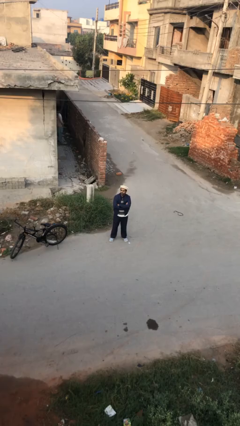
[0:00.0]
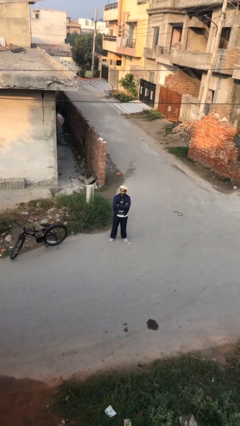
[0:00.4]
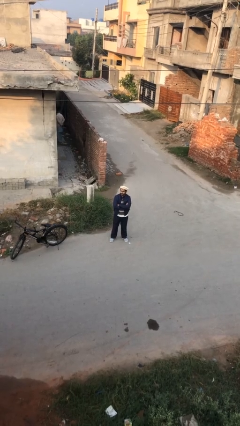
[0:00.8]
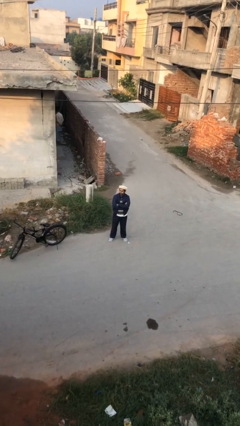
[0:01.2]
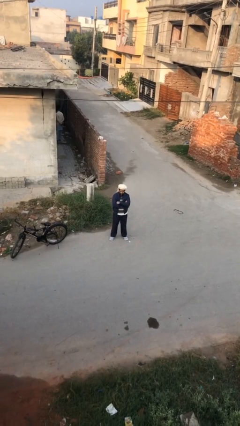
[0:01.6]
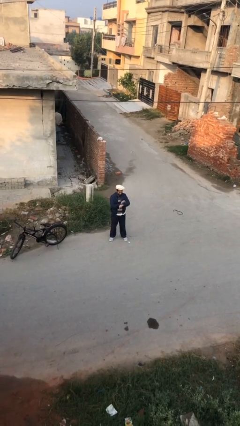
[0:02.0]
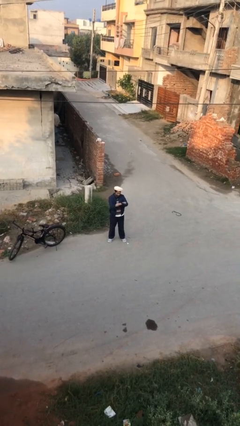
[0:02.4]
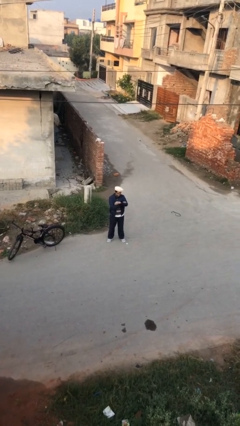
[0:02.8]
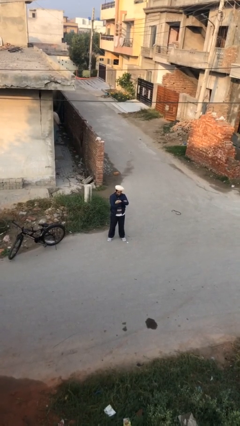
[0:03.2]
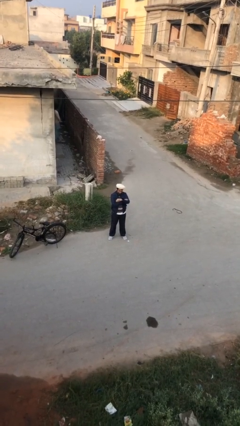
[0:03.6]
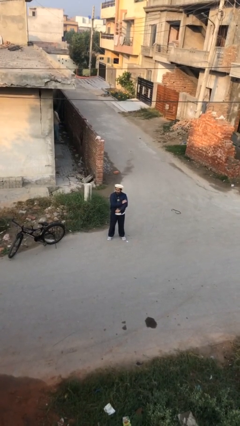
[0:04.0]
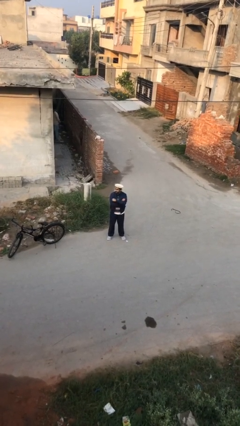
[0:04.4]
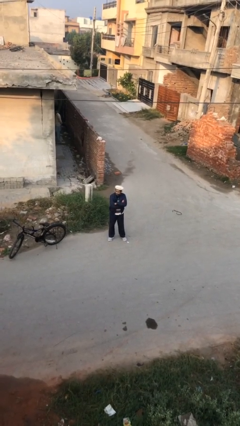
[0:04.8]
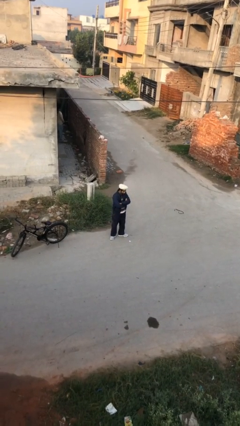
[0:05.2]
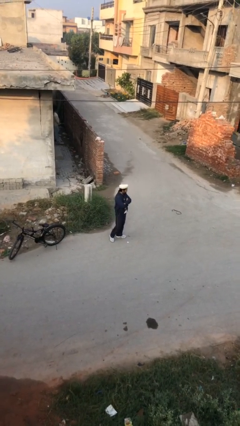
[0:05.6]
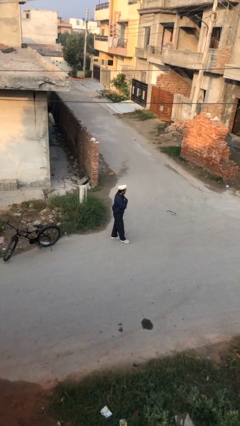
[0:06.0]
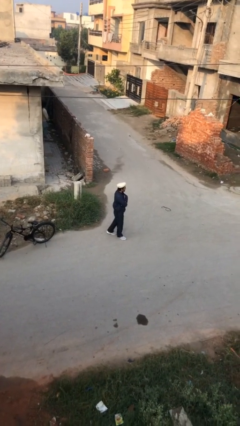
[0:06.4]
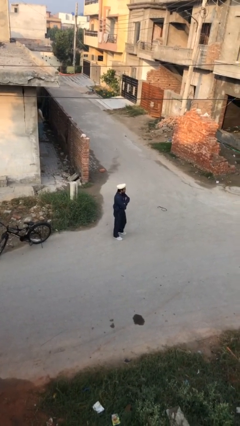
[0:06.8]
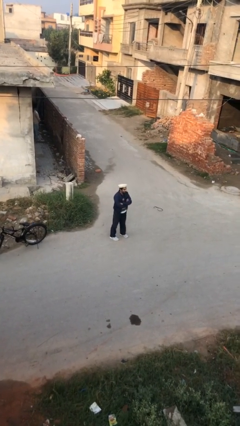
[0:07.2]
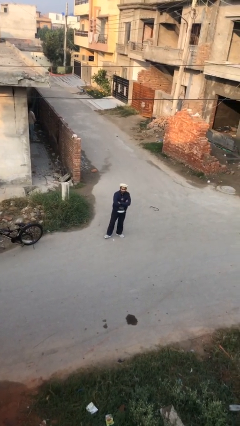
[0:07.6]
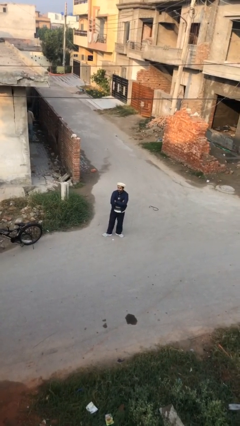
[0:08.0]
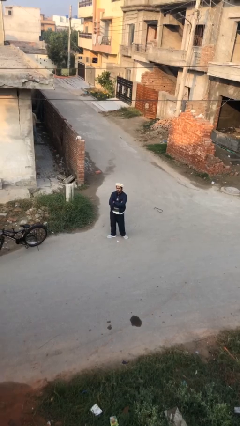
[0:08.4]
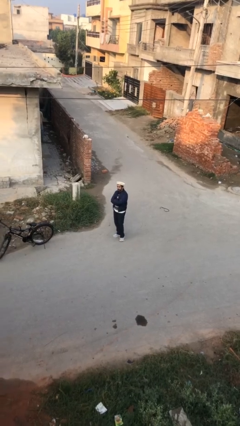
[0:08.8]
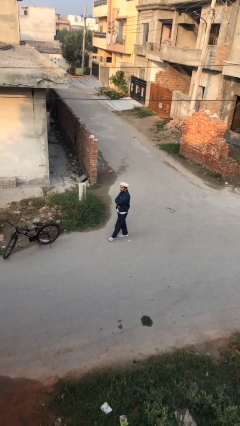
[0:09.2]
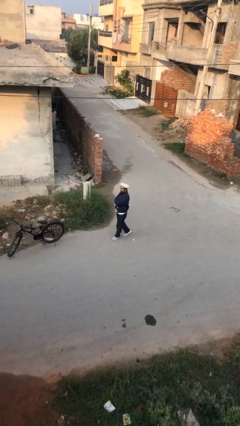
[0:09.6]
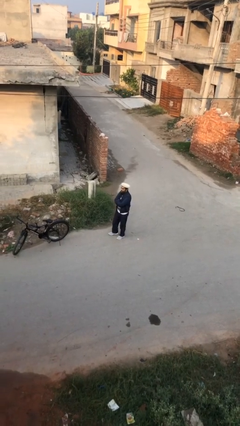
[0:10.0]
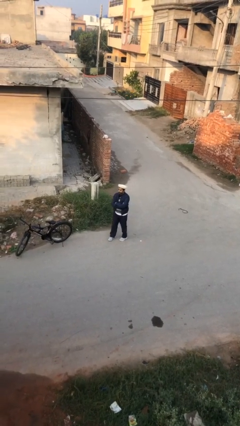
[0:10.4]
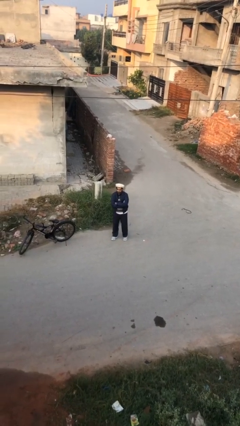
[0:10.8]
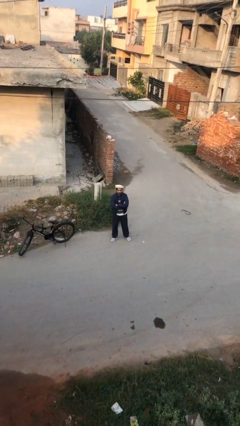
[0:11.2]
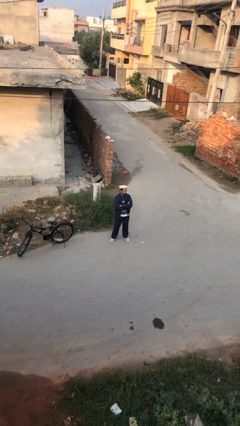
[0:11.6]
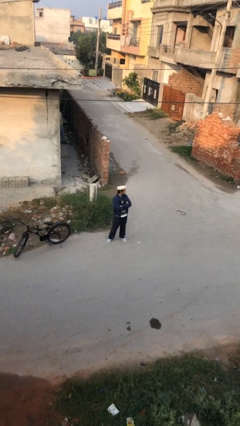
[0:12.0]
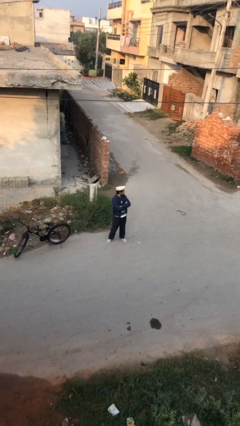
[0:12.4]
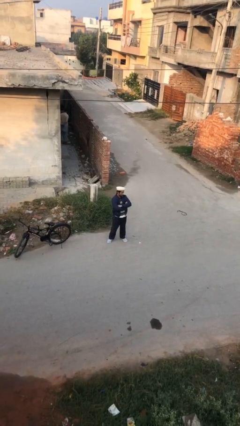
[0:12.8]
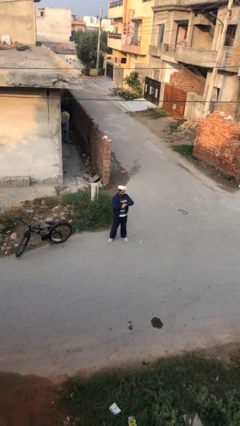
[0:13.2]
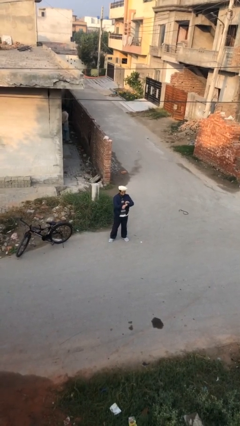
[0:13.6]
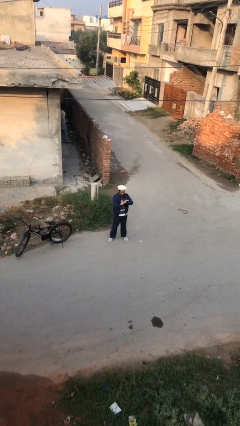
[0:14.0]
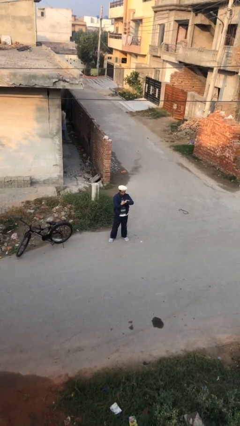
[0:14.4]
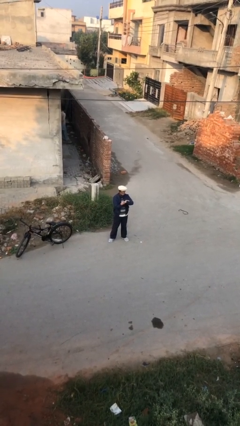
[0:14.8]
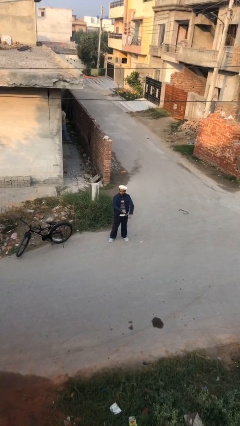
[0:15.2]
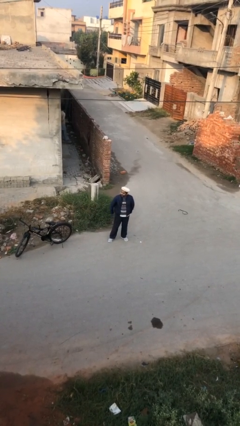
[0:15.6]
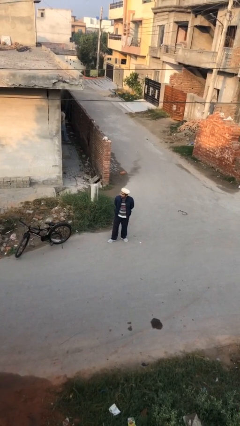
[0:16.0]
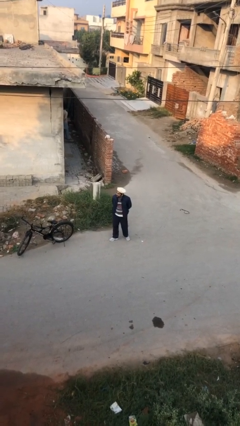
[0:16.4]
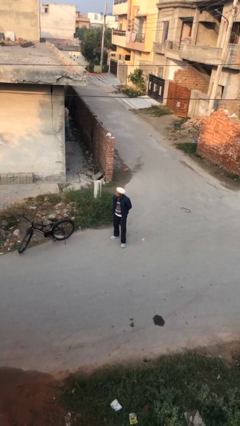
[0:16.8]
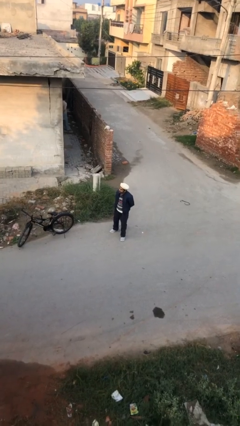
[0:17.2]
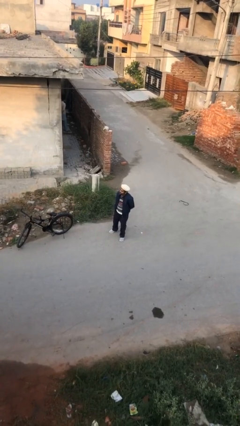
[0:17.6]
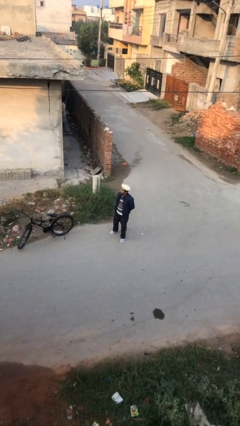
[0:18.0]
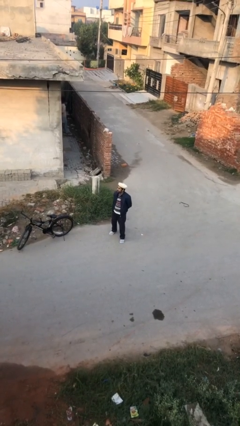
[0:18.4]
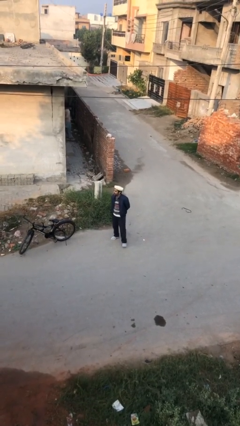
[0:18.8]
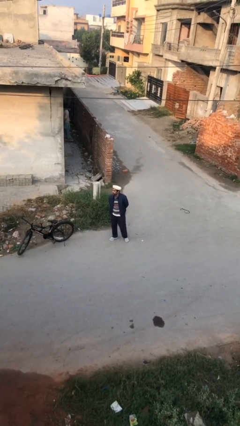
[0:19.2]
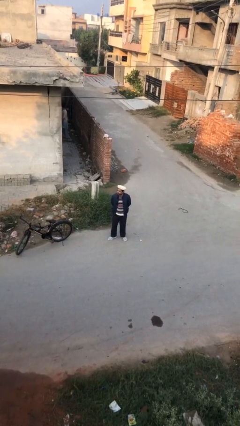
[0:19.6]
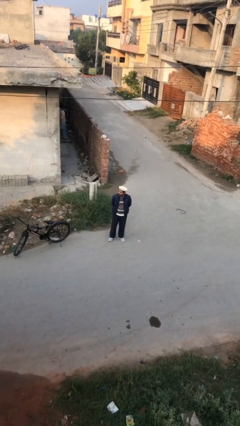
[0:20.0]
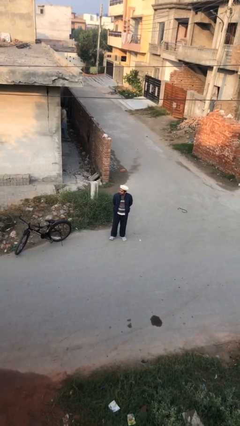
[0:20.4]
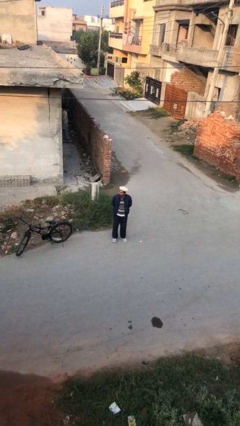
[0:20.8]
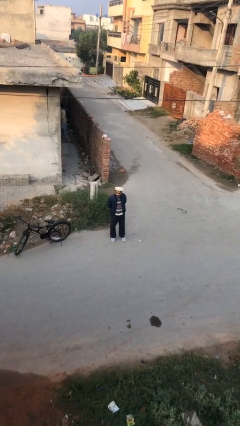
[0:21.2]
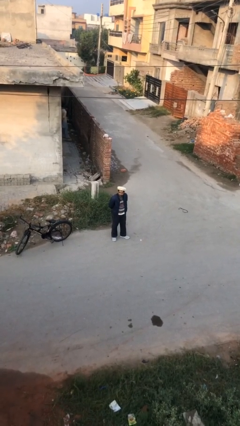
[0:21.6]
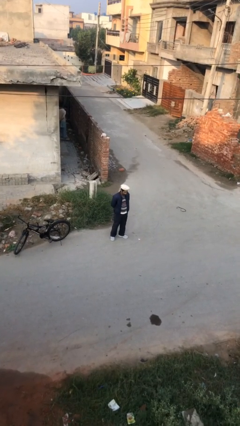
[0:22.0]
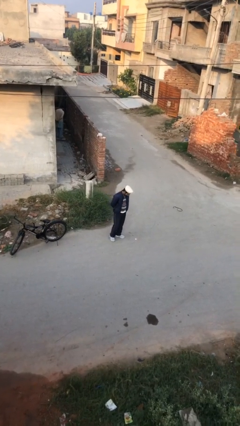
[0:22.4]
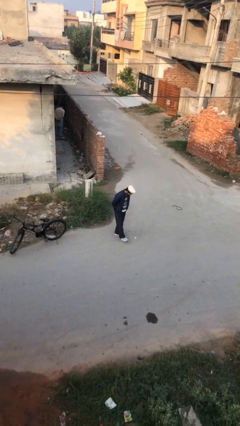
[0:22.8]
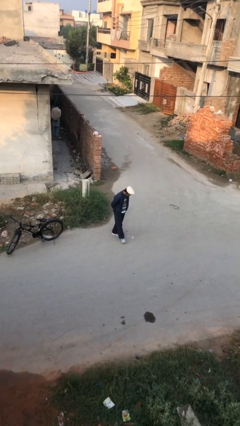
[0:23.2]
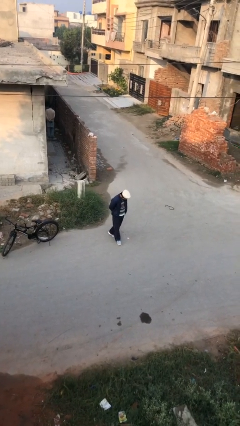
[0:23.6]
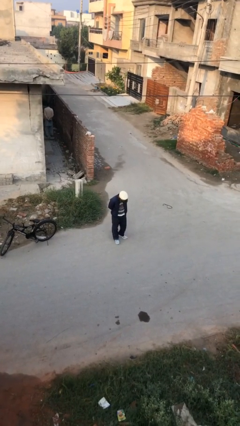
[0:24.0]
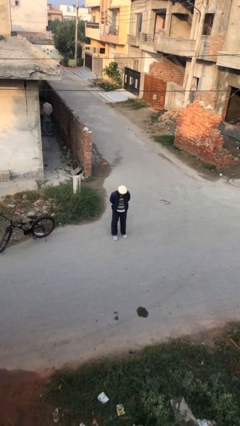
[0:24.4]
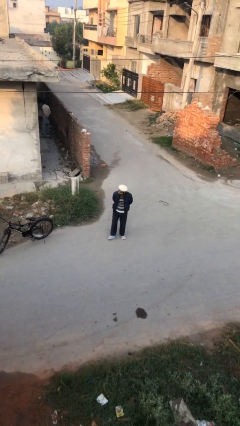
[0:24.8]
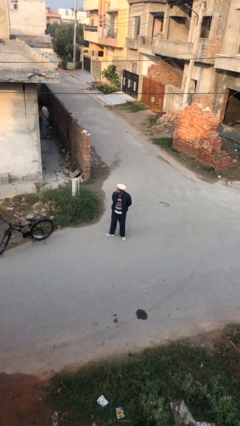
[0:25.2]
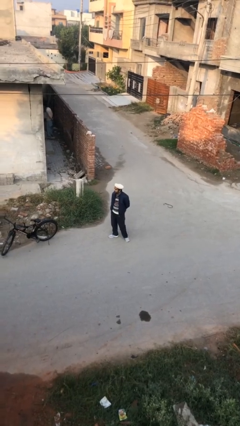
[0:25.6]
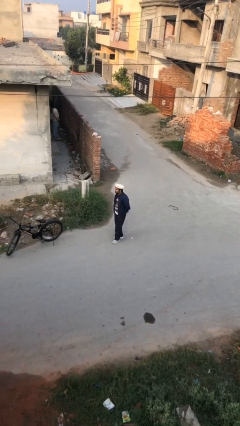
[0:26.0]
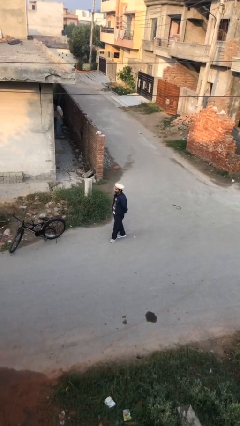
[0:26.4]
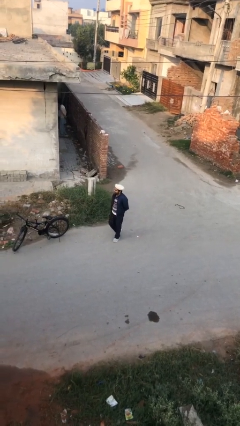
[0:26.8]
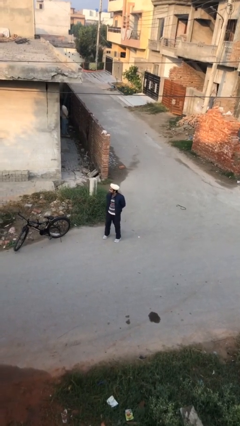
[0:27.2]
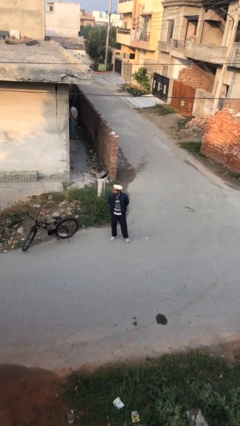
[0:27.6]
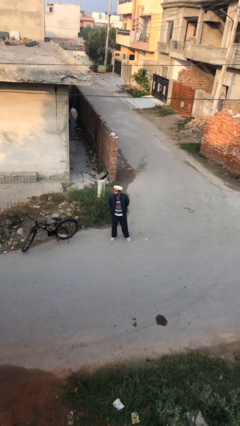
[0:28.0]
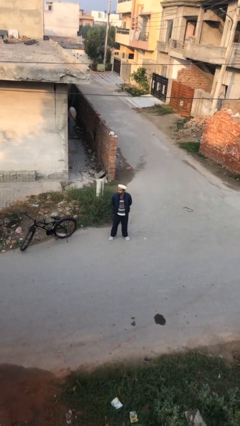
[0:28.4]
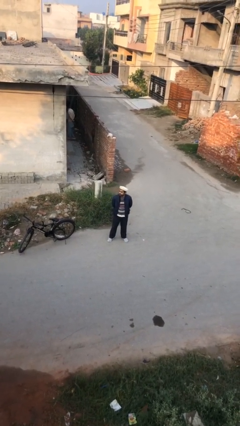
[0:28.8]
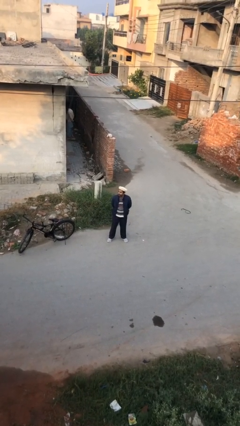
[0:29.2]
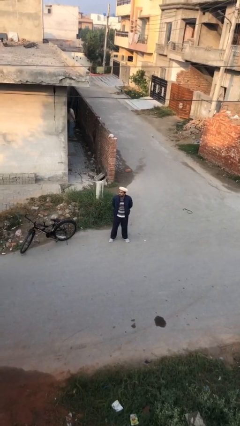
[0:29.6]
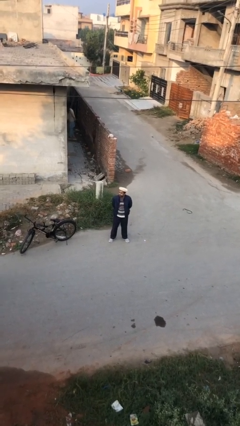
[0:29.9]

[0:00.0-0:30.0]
person walks

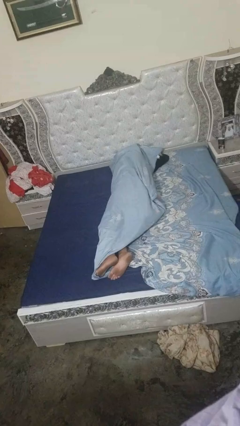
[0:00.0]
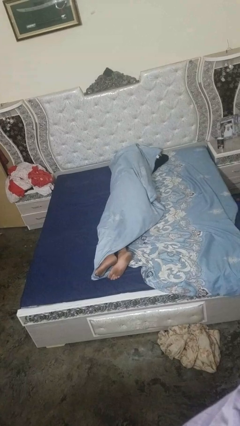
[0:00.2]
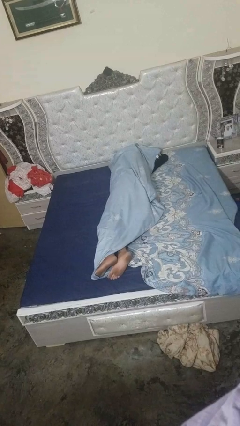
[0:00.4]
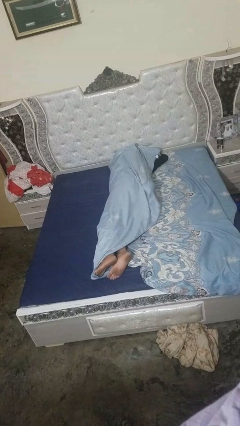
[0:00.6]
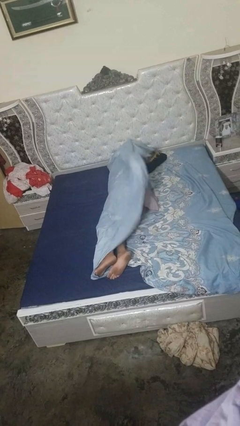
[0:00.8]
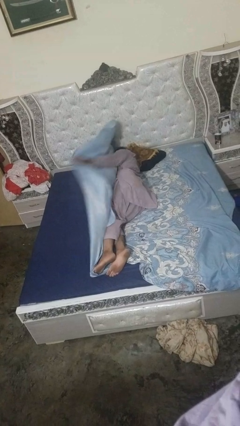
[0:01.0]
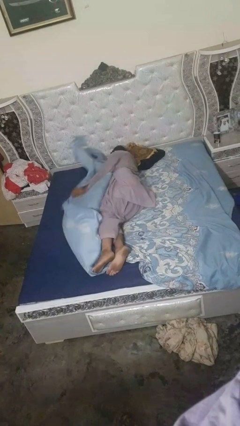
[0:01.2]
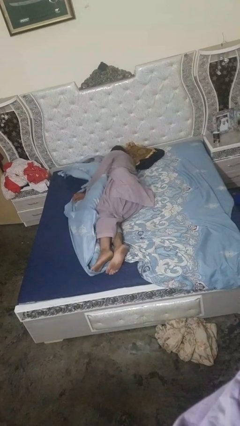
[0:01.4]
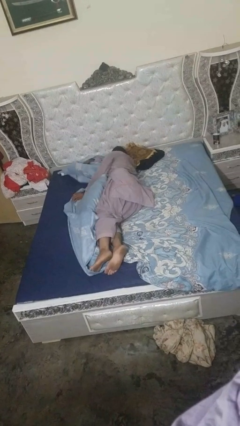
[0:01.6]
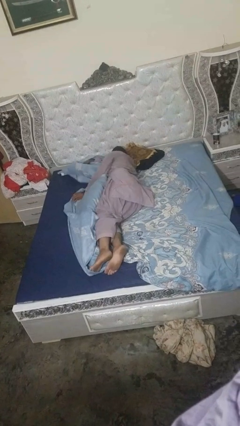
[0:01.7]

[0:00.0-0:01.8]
person uncovers with bedsheets

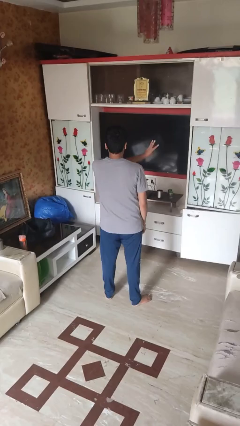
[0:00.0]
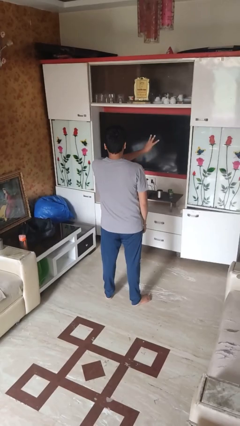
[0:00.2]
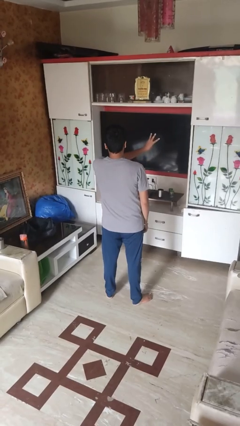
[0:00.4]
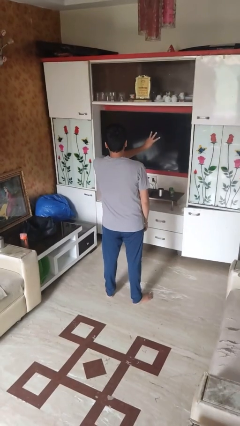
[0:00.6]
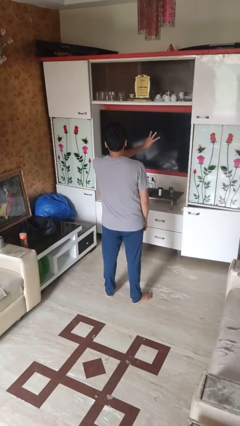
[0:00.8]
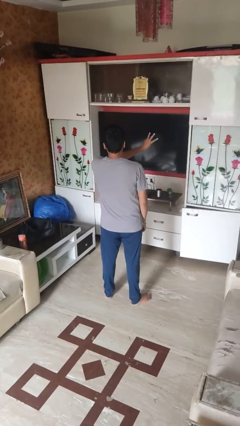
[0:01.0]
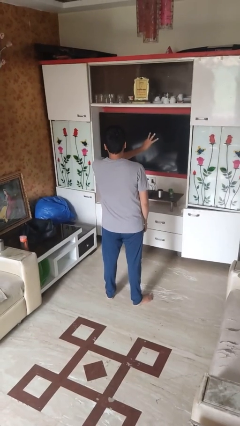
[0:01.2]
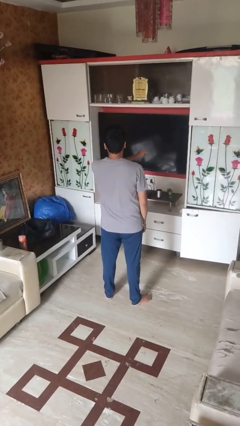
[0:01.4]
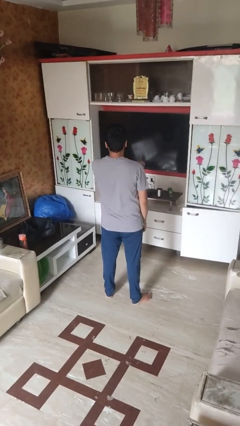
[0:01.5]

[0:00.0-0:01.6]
person gestures number three
